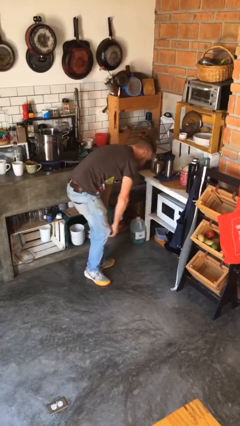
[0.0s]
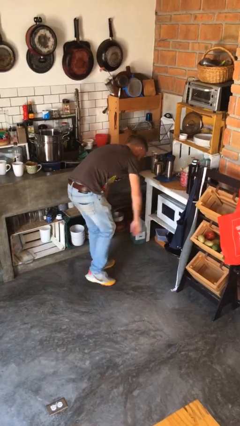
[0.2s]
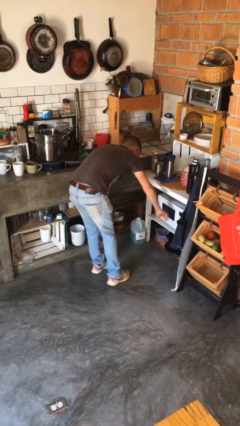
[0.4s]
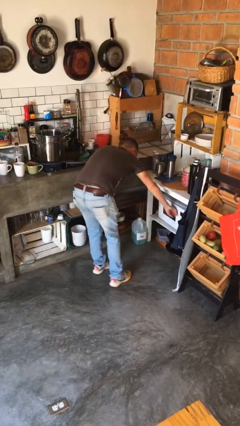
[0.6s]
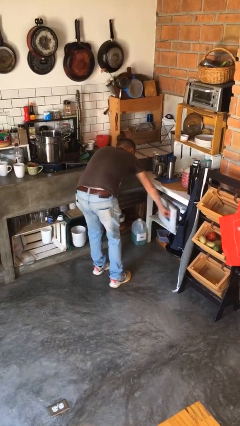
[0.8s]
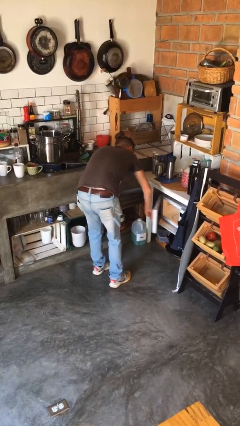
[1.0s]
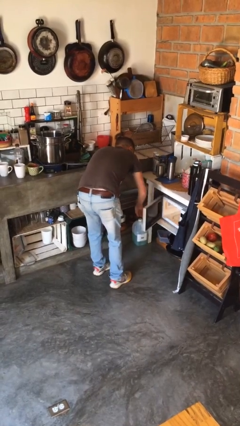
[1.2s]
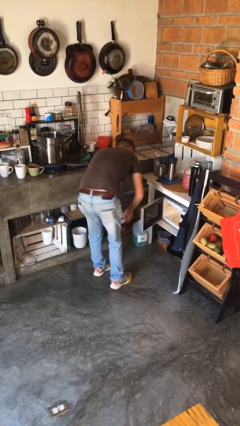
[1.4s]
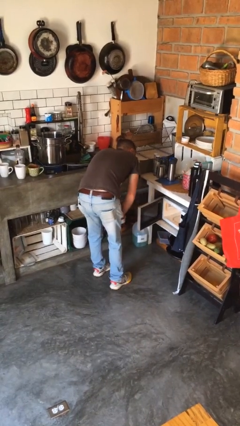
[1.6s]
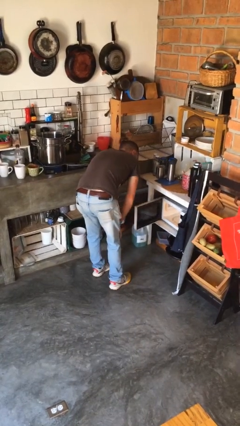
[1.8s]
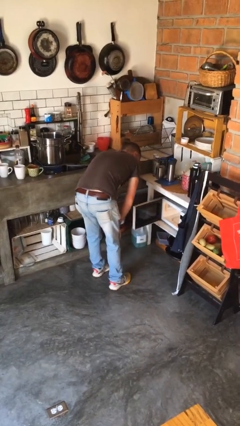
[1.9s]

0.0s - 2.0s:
person opens microwave

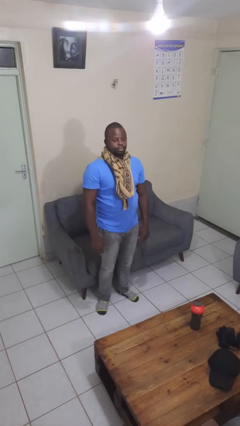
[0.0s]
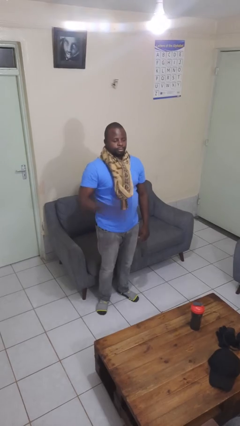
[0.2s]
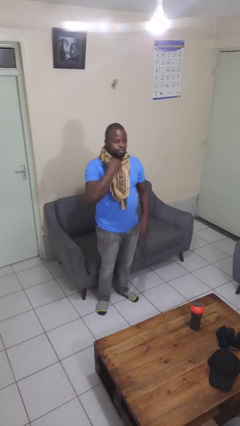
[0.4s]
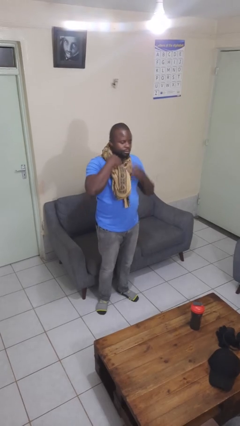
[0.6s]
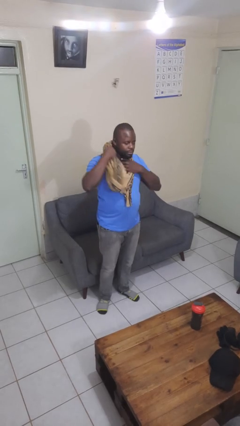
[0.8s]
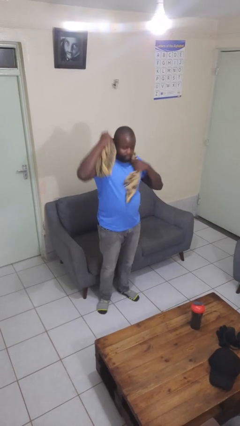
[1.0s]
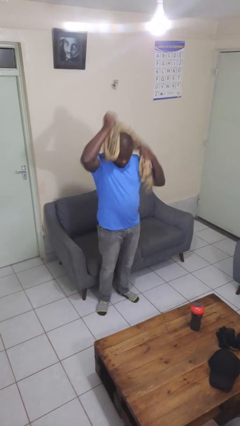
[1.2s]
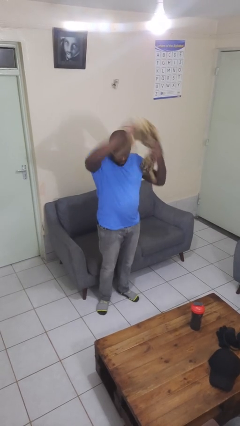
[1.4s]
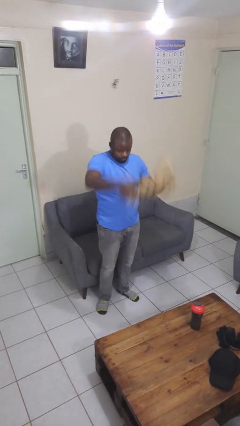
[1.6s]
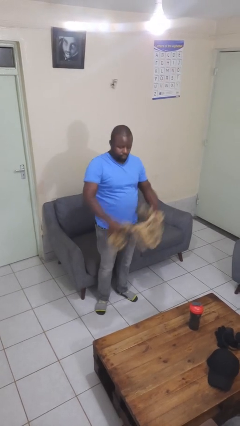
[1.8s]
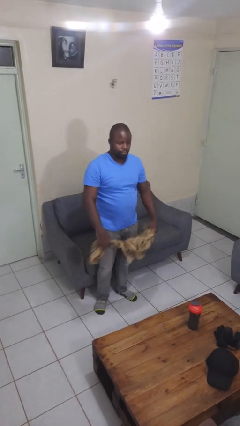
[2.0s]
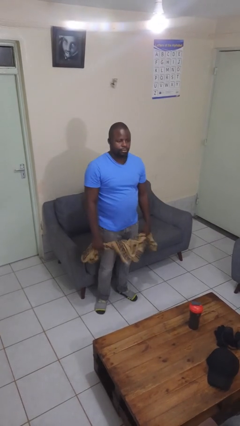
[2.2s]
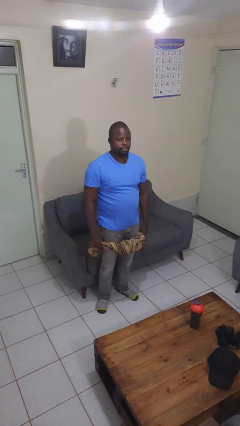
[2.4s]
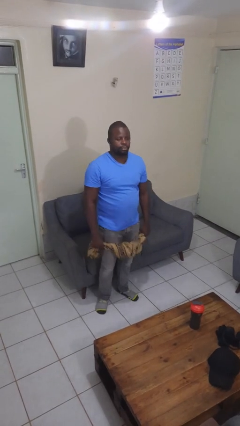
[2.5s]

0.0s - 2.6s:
person takes off scarf

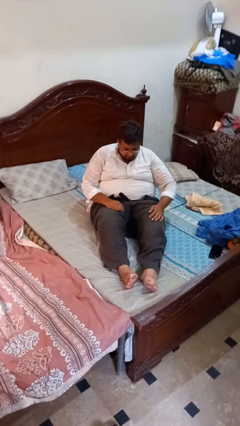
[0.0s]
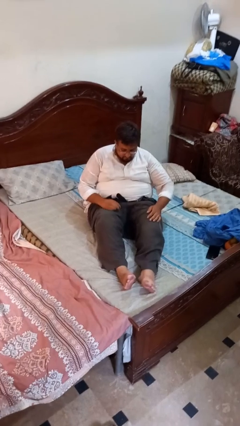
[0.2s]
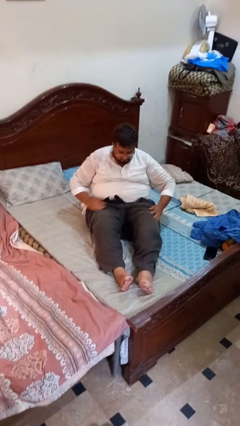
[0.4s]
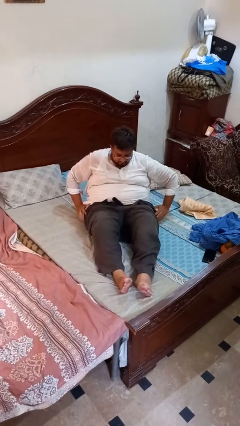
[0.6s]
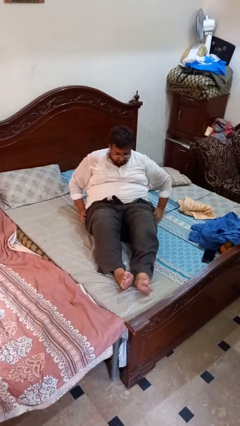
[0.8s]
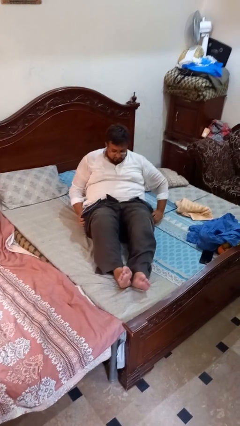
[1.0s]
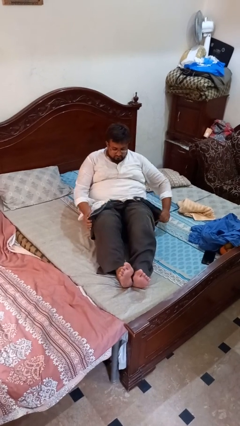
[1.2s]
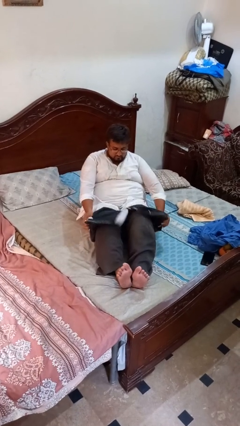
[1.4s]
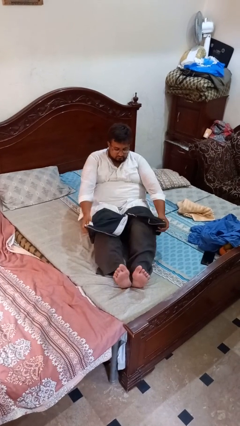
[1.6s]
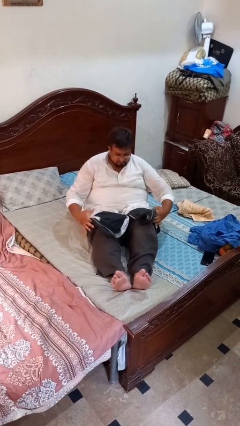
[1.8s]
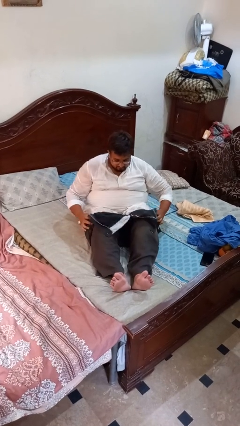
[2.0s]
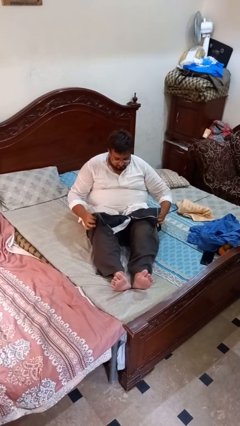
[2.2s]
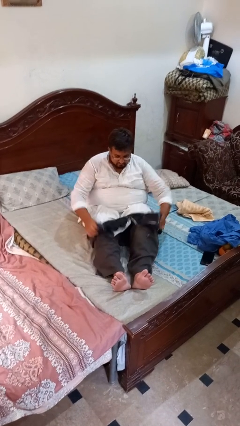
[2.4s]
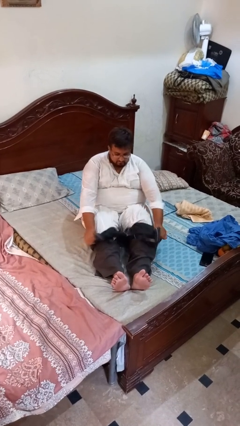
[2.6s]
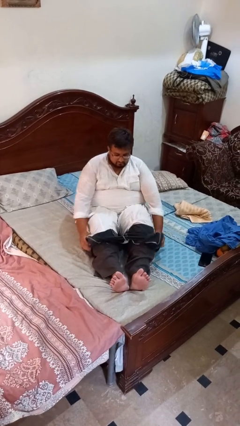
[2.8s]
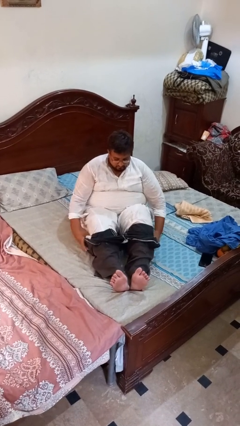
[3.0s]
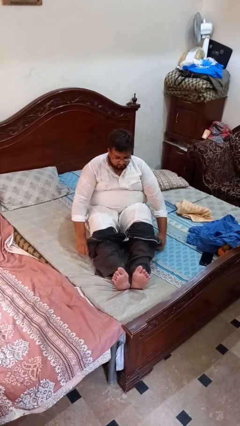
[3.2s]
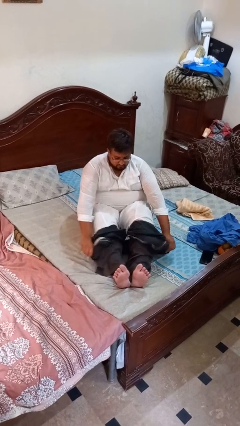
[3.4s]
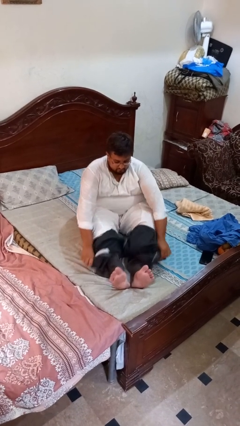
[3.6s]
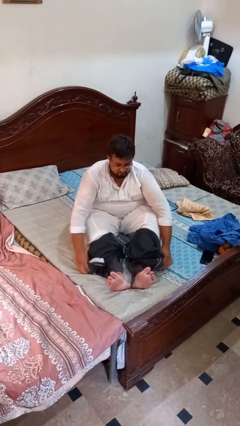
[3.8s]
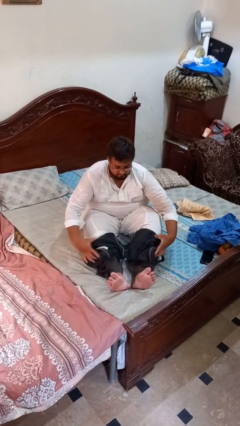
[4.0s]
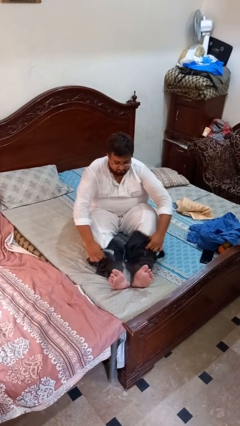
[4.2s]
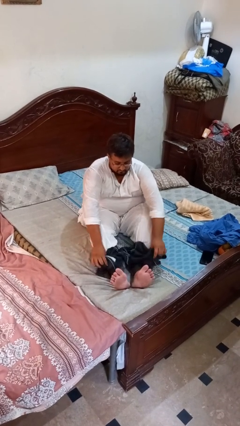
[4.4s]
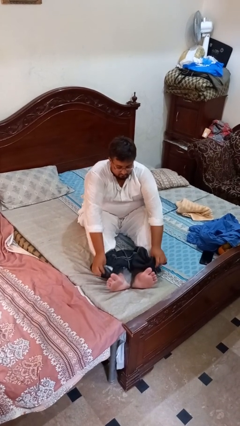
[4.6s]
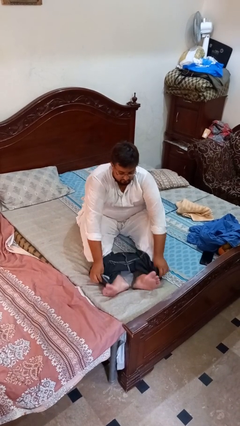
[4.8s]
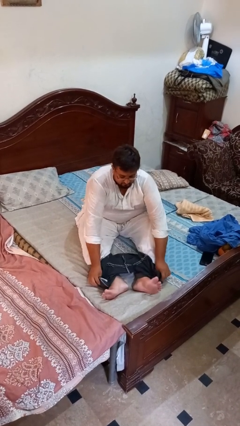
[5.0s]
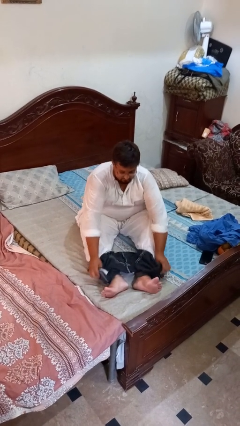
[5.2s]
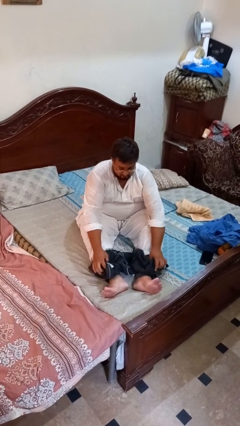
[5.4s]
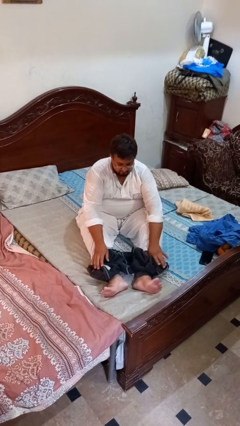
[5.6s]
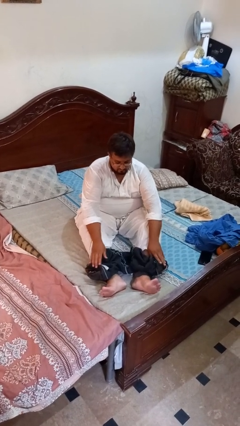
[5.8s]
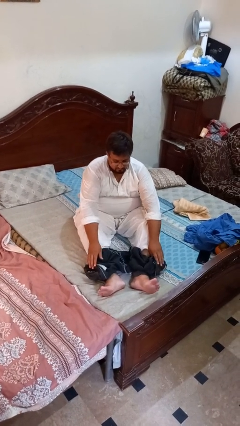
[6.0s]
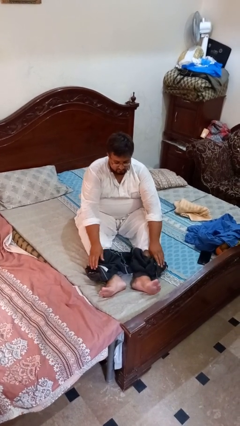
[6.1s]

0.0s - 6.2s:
person takes off pants

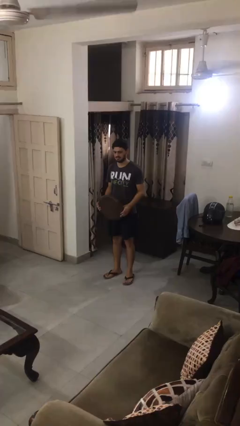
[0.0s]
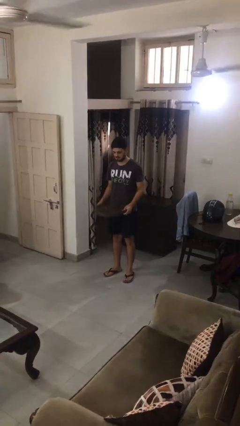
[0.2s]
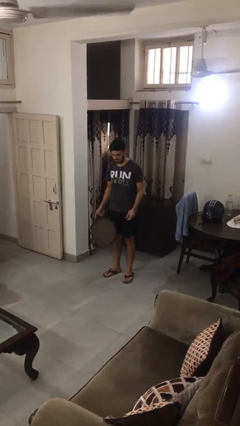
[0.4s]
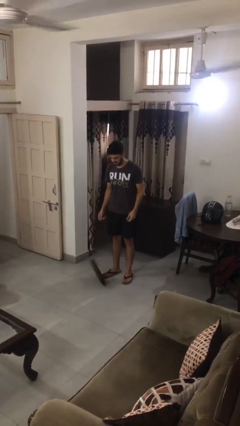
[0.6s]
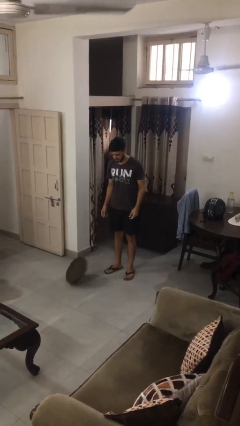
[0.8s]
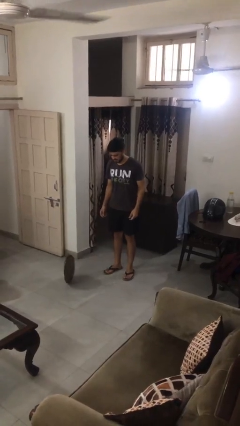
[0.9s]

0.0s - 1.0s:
person drops object

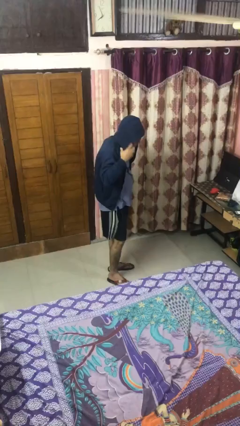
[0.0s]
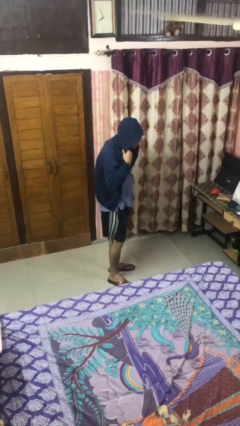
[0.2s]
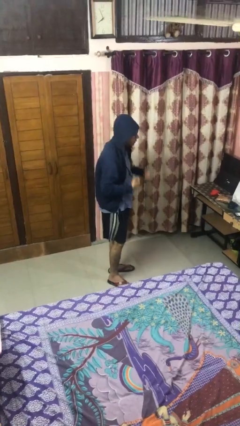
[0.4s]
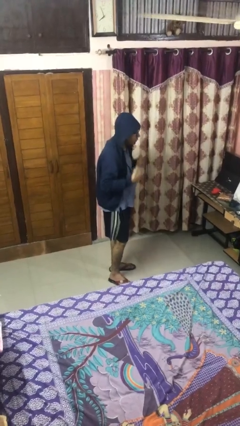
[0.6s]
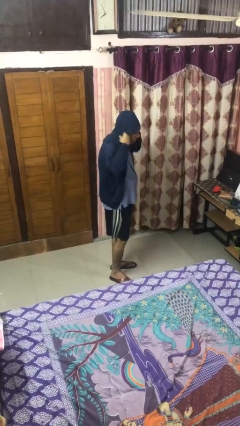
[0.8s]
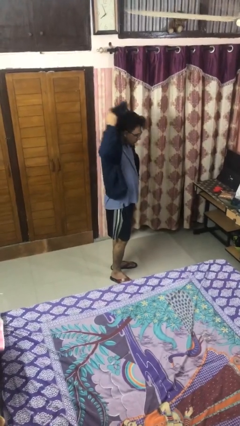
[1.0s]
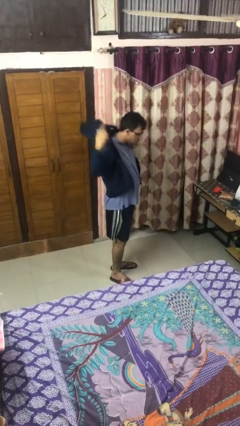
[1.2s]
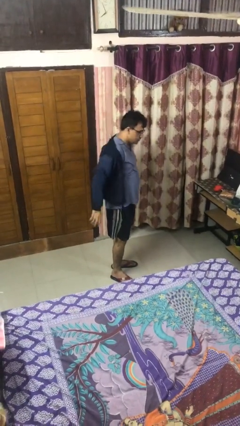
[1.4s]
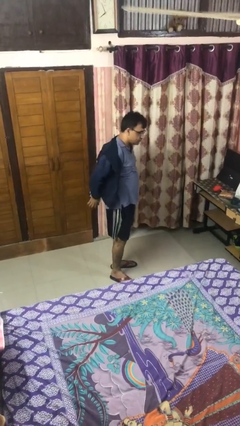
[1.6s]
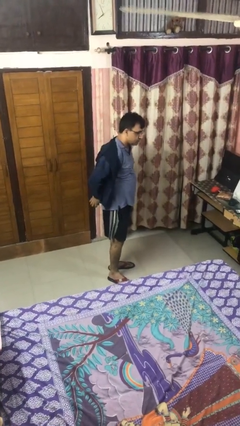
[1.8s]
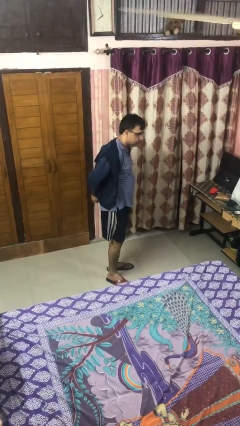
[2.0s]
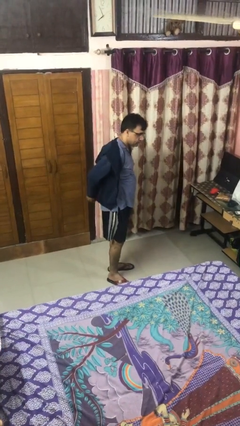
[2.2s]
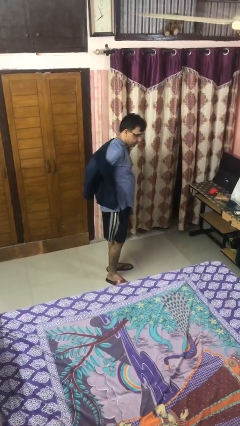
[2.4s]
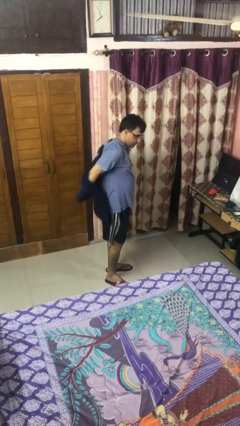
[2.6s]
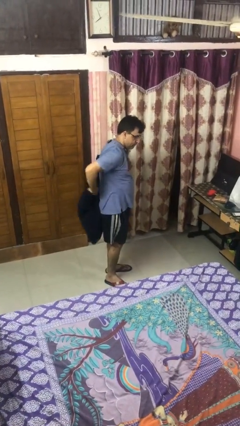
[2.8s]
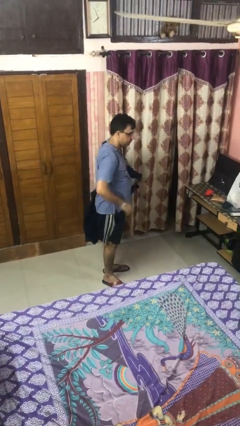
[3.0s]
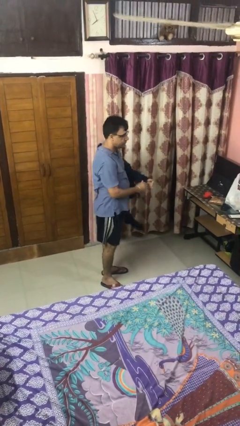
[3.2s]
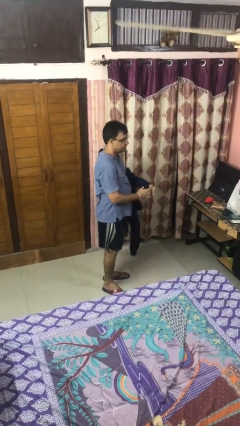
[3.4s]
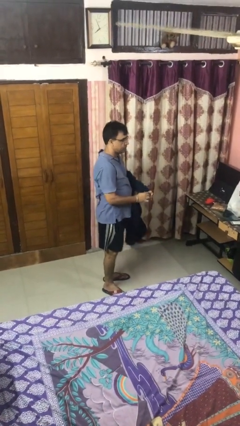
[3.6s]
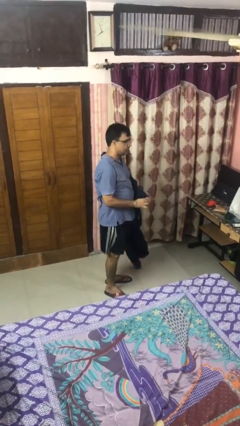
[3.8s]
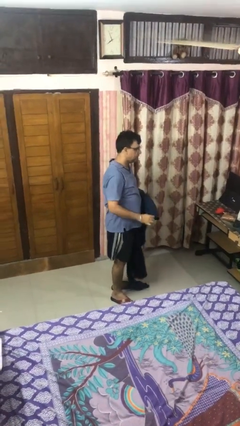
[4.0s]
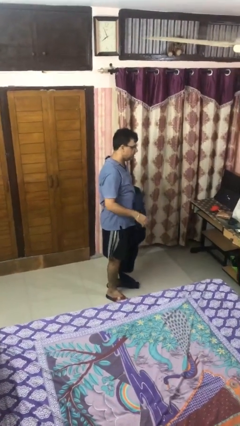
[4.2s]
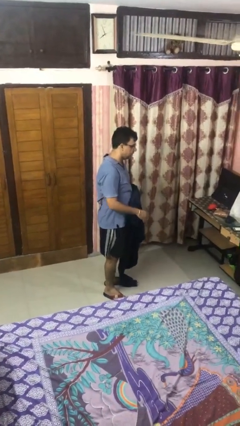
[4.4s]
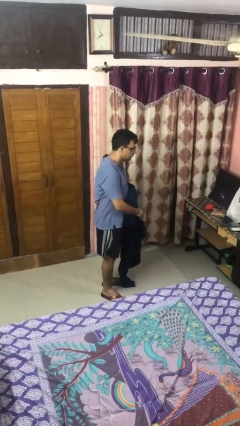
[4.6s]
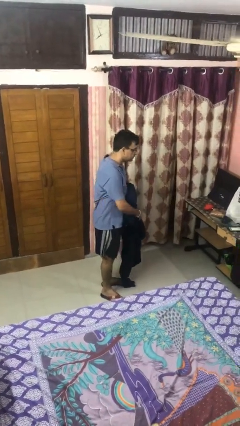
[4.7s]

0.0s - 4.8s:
person takes off hoodie

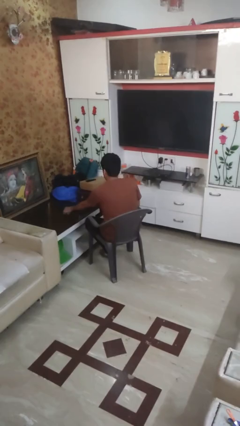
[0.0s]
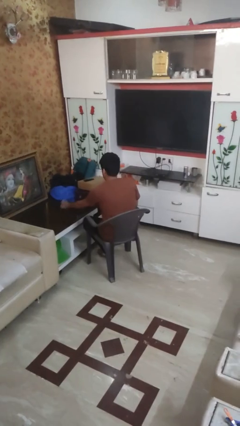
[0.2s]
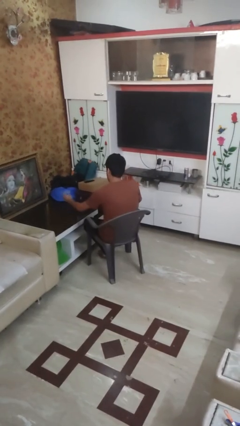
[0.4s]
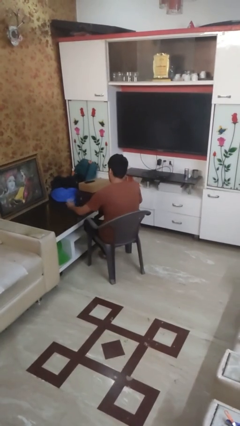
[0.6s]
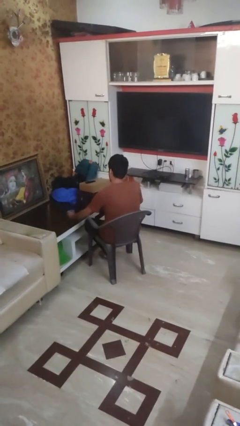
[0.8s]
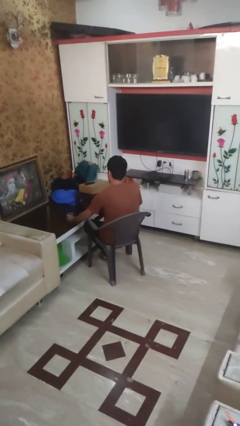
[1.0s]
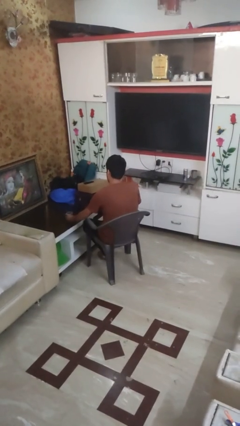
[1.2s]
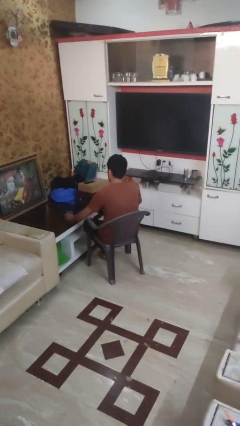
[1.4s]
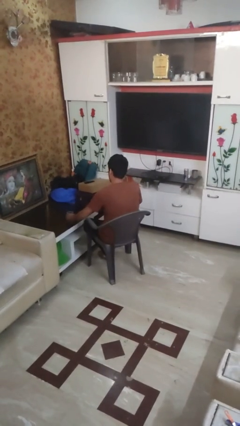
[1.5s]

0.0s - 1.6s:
person sets upright glass
